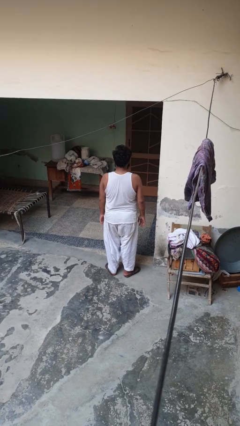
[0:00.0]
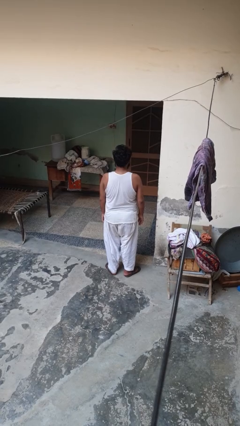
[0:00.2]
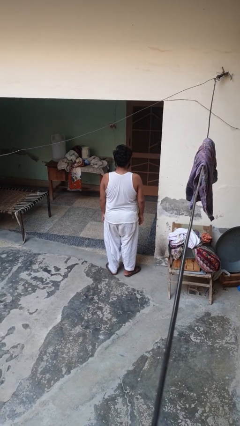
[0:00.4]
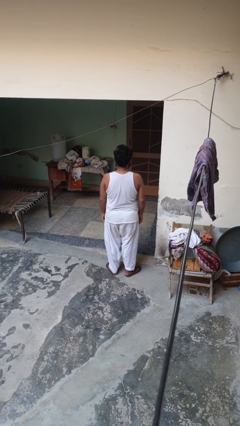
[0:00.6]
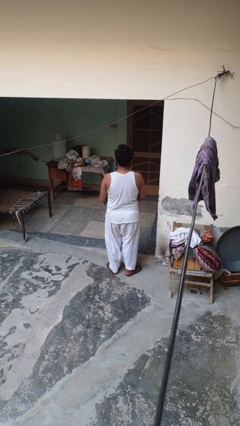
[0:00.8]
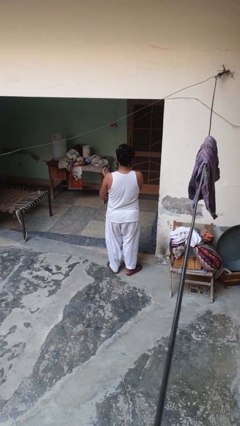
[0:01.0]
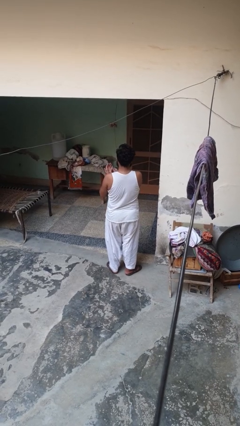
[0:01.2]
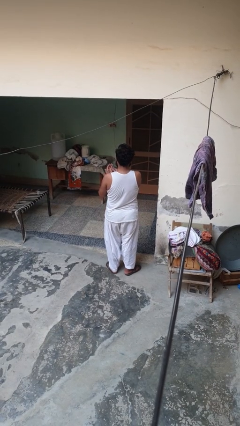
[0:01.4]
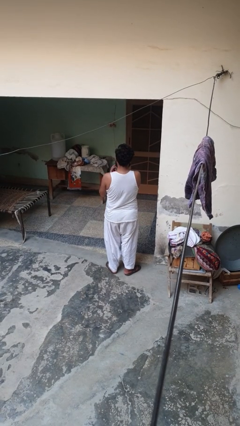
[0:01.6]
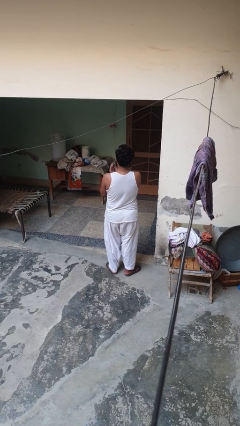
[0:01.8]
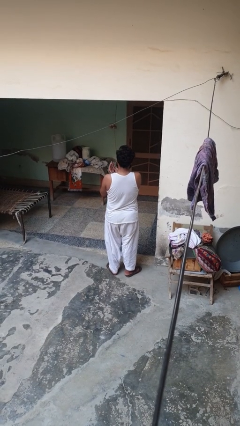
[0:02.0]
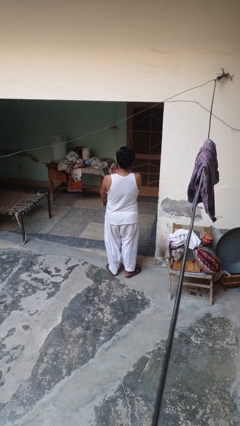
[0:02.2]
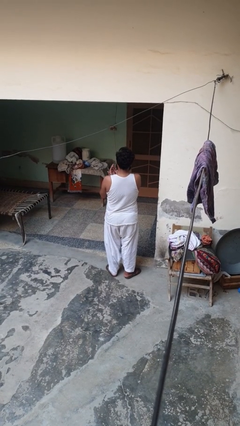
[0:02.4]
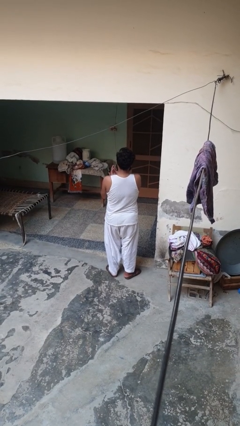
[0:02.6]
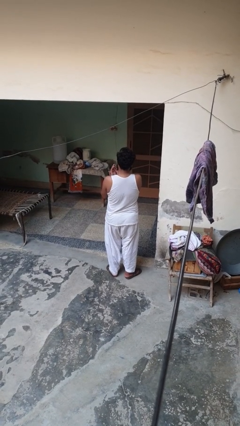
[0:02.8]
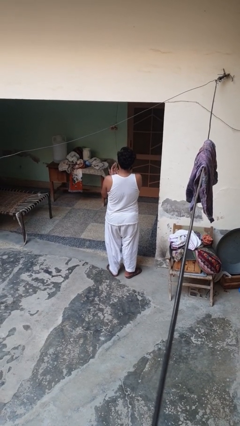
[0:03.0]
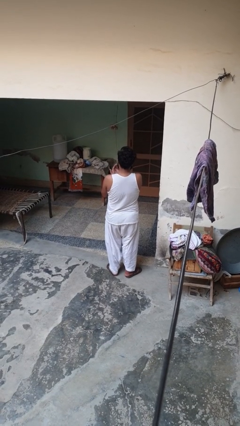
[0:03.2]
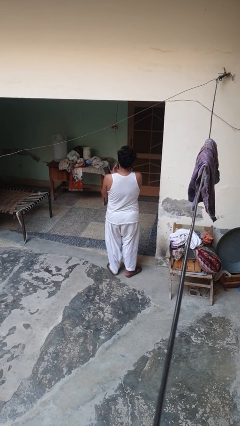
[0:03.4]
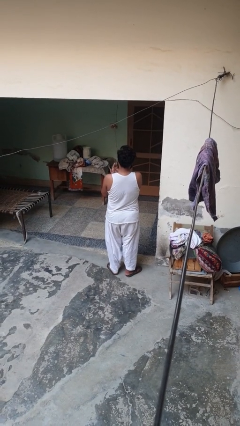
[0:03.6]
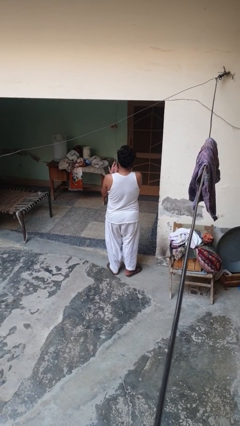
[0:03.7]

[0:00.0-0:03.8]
person snaps fingers

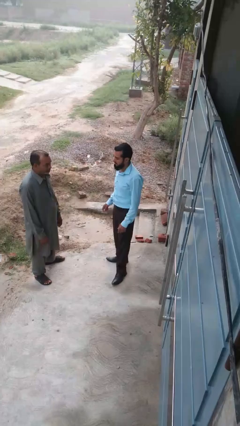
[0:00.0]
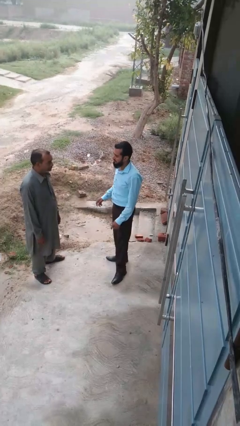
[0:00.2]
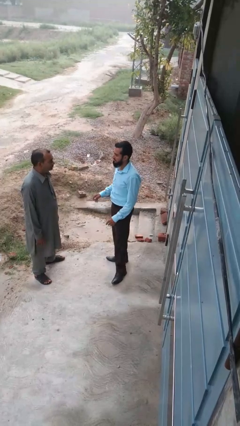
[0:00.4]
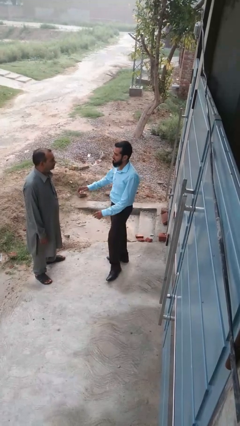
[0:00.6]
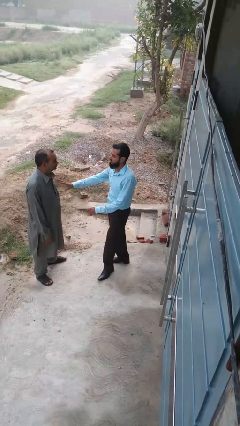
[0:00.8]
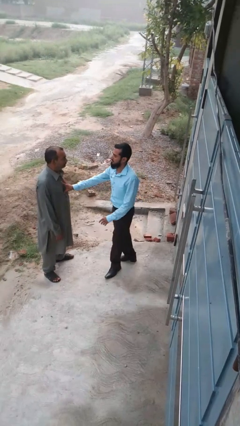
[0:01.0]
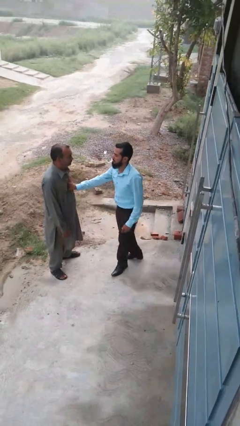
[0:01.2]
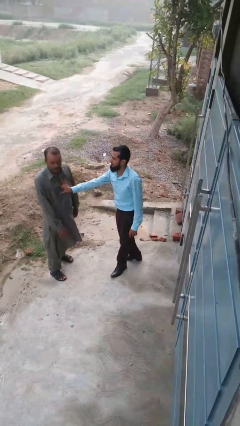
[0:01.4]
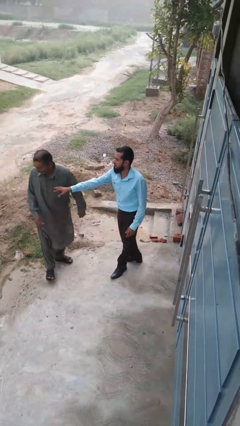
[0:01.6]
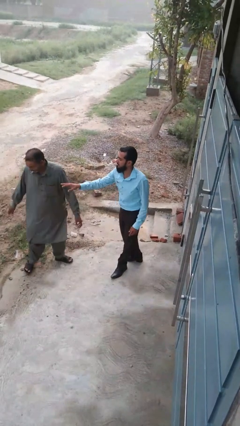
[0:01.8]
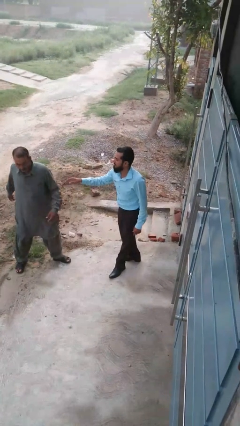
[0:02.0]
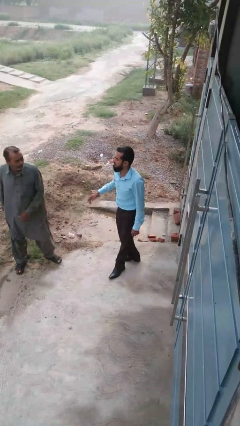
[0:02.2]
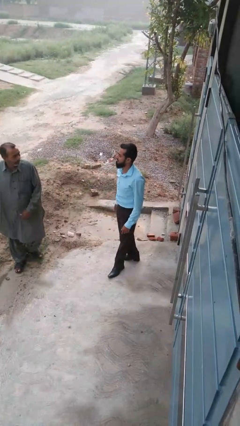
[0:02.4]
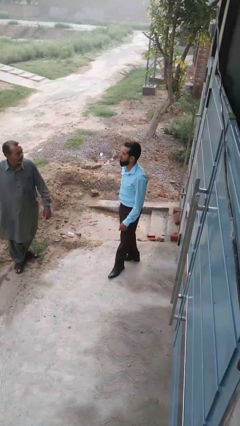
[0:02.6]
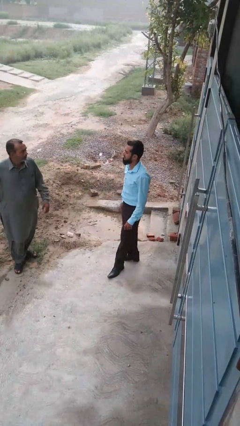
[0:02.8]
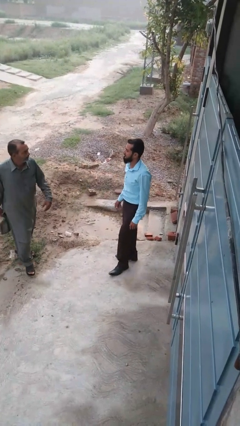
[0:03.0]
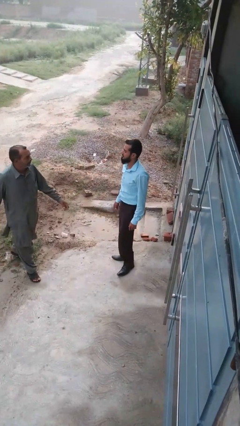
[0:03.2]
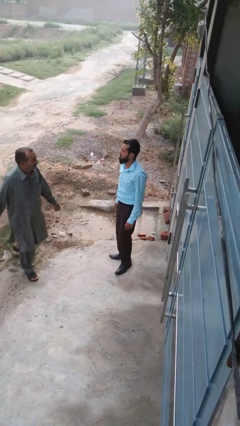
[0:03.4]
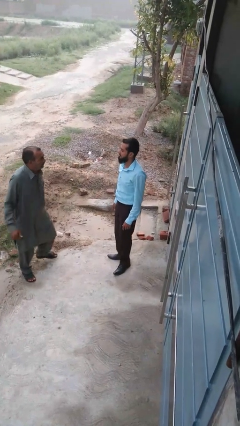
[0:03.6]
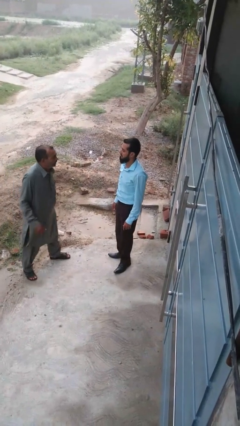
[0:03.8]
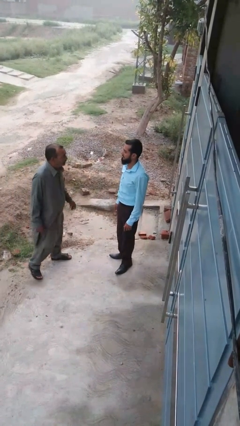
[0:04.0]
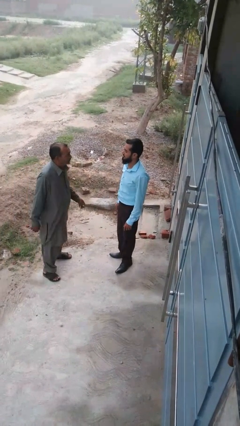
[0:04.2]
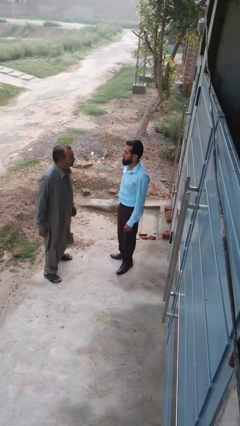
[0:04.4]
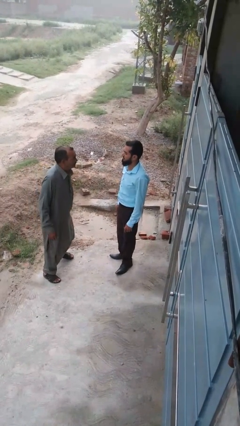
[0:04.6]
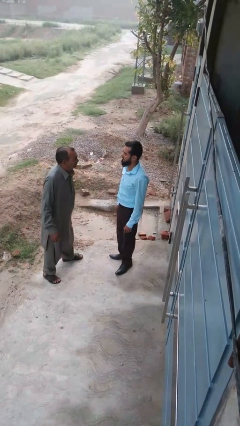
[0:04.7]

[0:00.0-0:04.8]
person shoves person

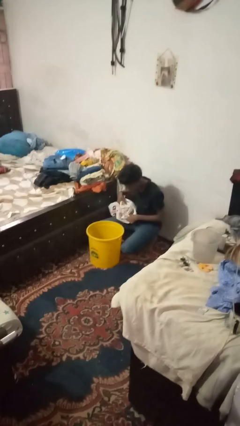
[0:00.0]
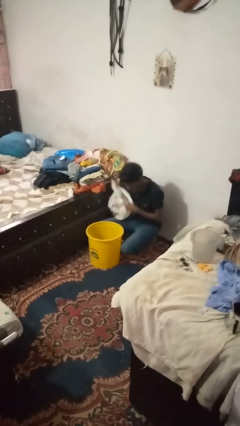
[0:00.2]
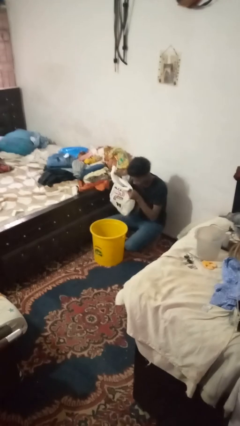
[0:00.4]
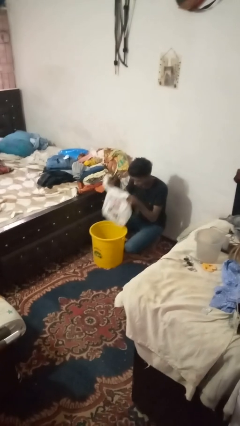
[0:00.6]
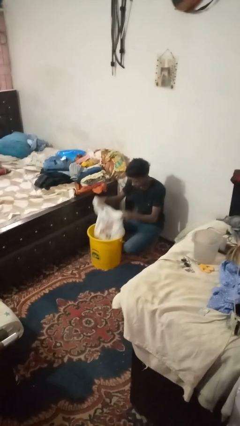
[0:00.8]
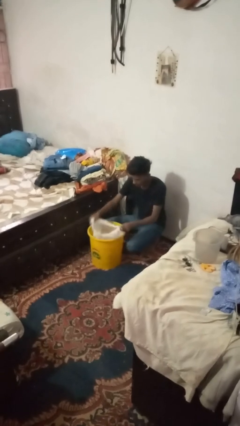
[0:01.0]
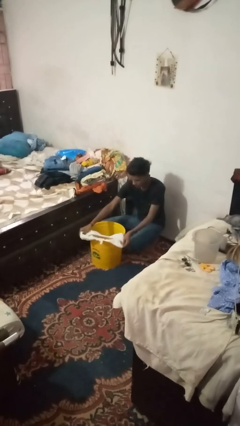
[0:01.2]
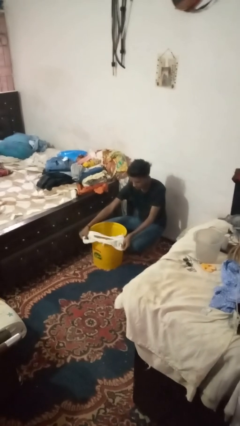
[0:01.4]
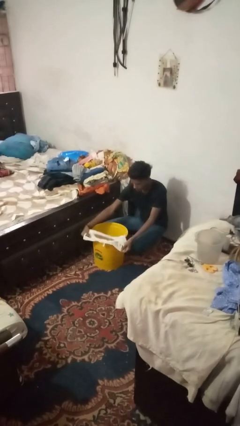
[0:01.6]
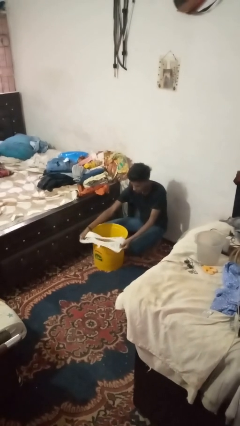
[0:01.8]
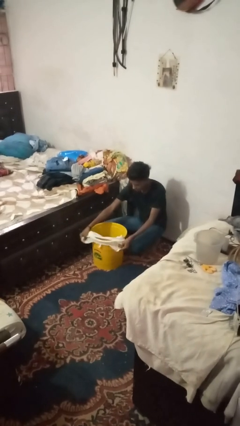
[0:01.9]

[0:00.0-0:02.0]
person inserts trashbag into trashcan

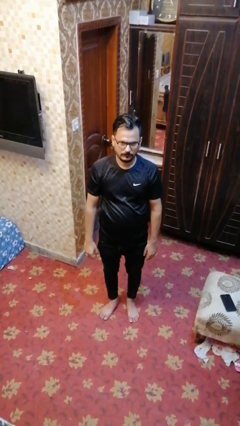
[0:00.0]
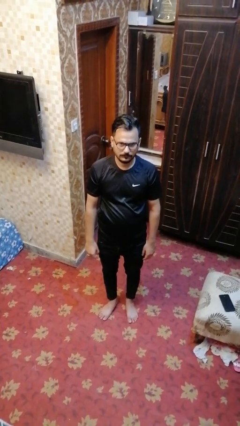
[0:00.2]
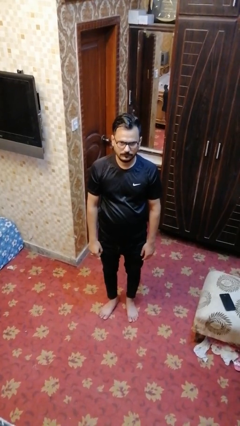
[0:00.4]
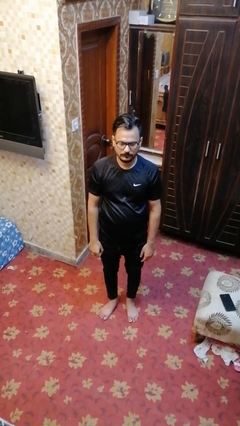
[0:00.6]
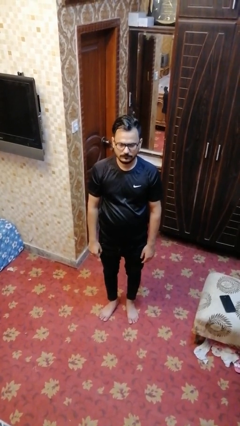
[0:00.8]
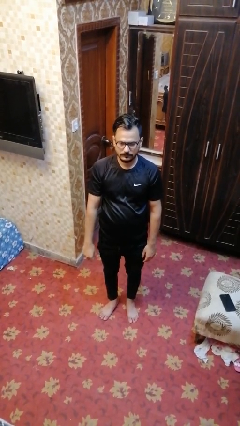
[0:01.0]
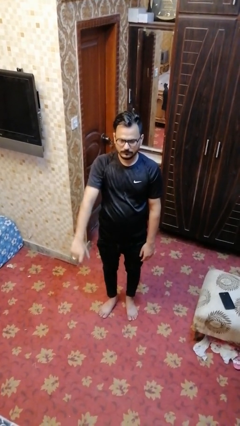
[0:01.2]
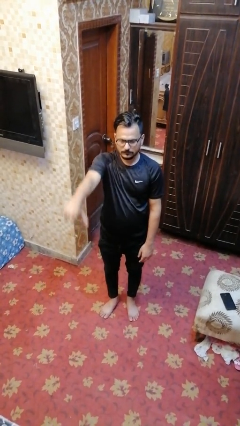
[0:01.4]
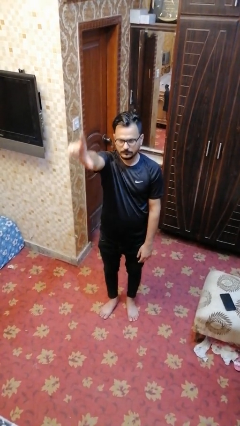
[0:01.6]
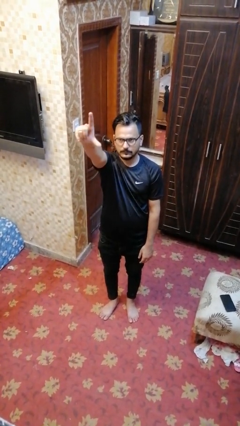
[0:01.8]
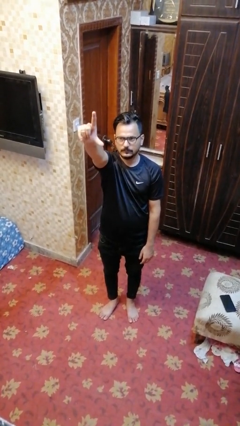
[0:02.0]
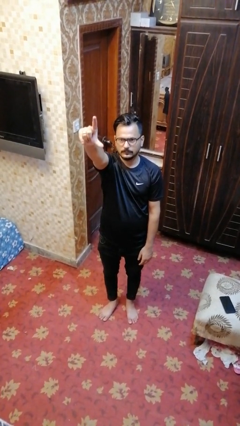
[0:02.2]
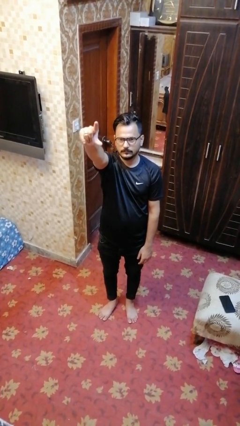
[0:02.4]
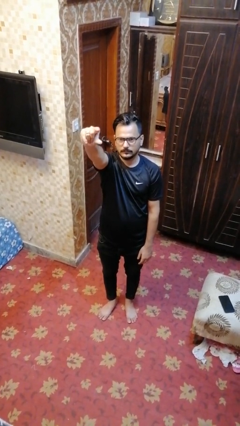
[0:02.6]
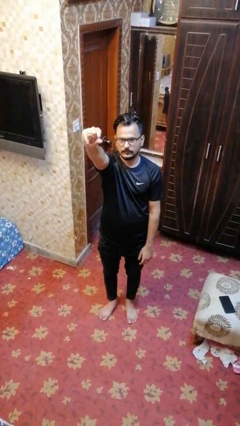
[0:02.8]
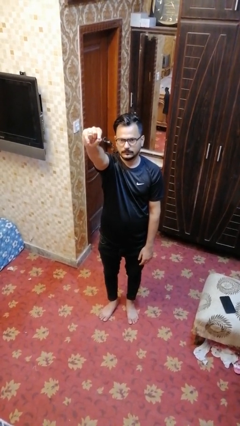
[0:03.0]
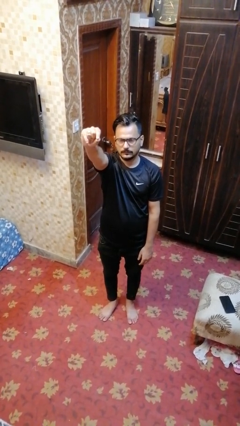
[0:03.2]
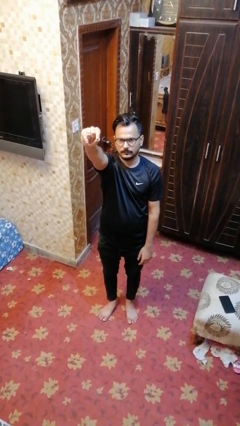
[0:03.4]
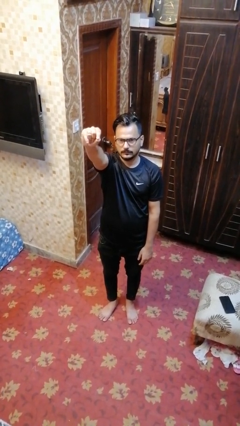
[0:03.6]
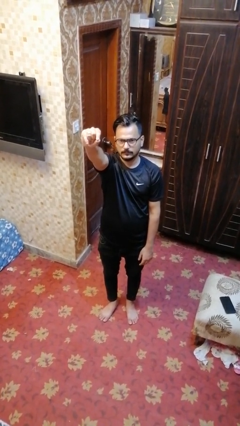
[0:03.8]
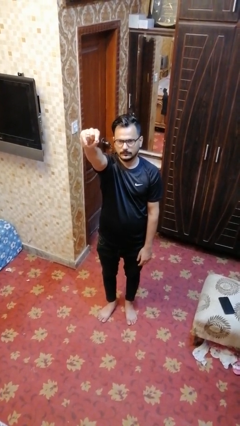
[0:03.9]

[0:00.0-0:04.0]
person gestures zoom in

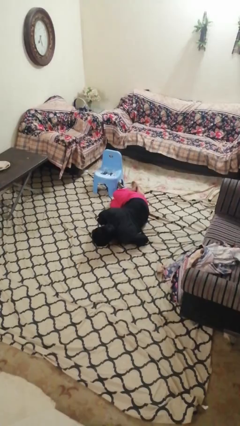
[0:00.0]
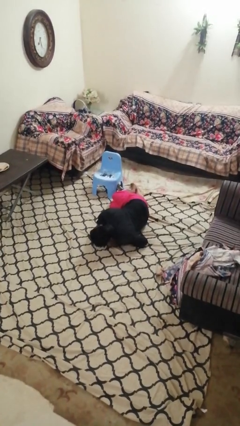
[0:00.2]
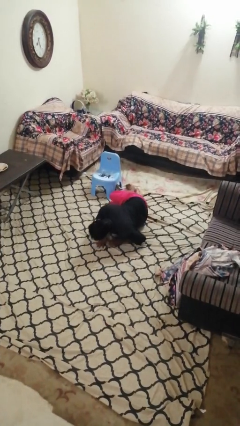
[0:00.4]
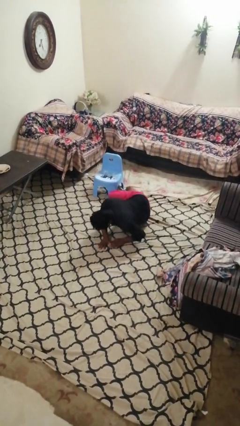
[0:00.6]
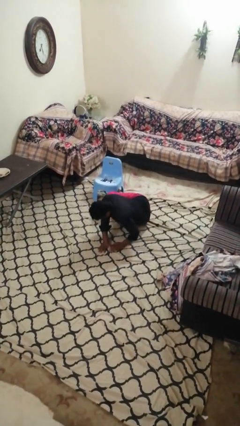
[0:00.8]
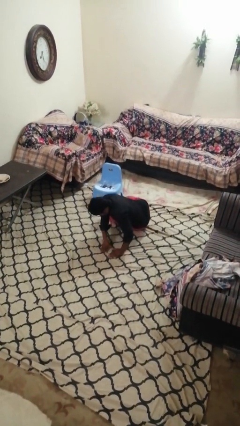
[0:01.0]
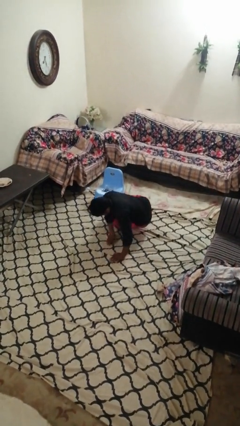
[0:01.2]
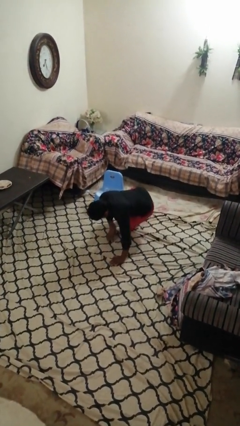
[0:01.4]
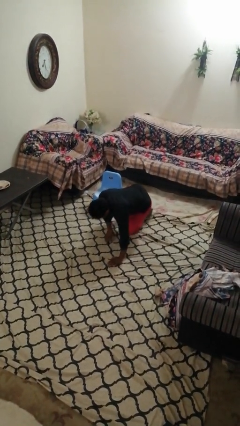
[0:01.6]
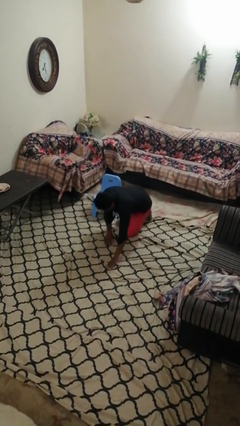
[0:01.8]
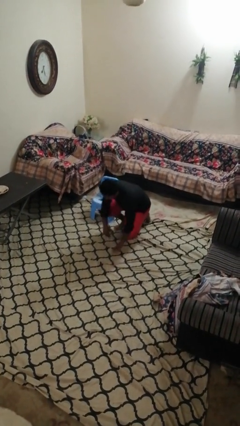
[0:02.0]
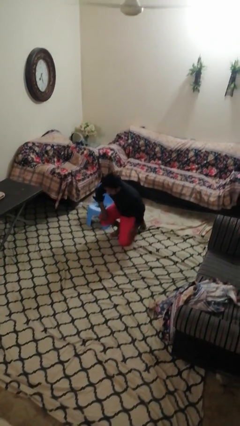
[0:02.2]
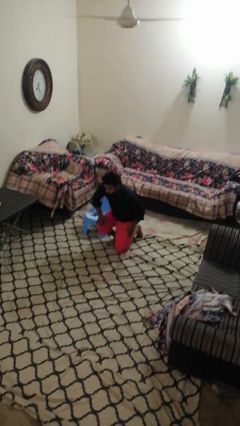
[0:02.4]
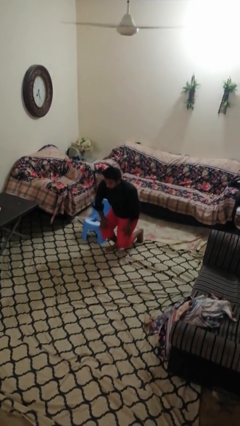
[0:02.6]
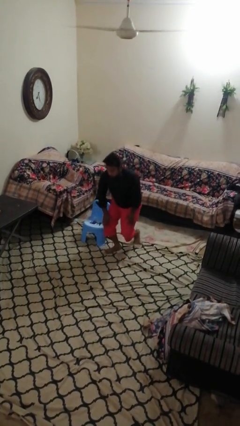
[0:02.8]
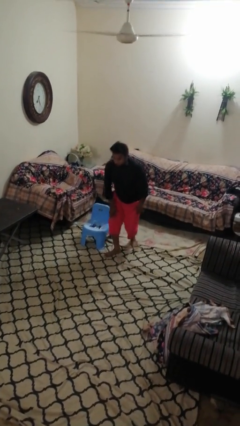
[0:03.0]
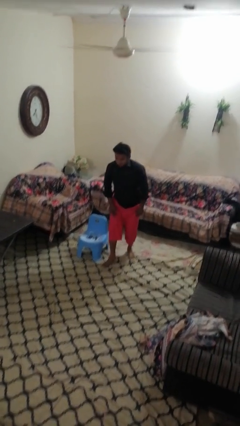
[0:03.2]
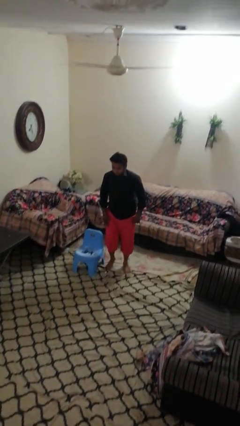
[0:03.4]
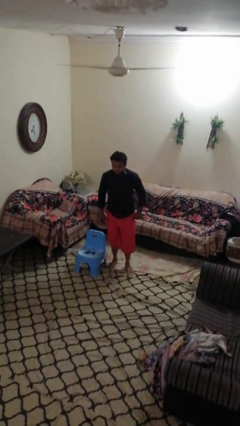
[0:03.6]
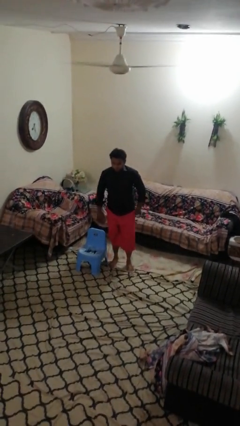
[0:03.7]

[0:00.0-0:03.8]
person stands up from floor
